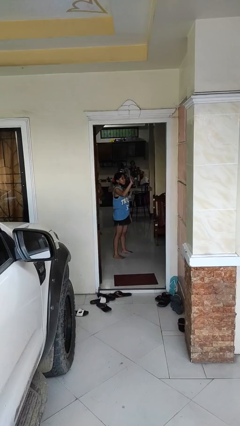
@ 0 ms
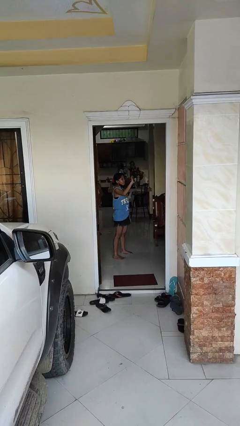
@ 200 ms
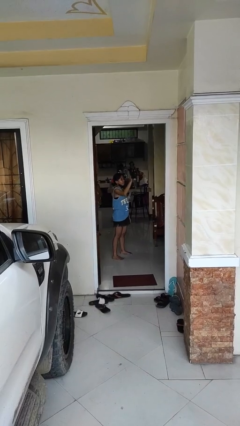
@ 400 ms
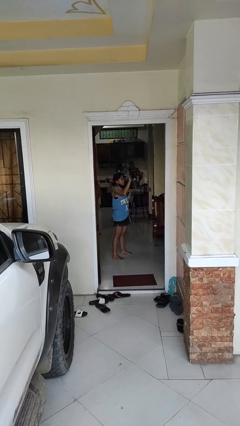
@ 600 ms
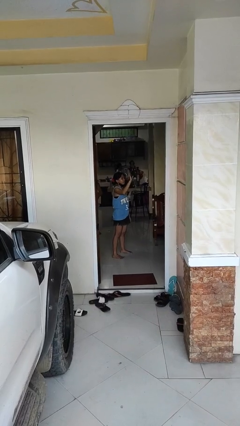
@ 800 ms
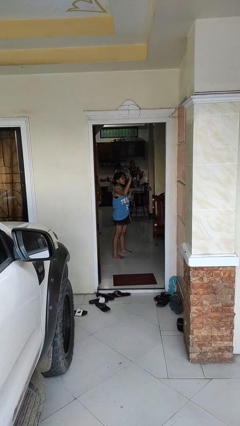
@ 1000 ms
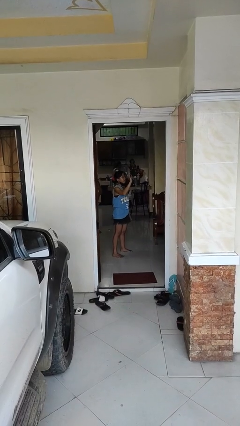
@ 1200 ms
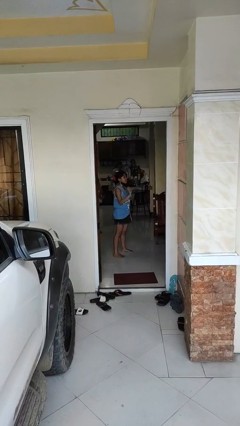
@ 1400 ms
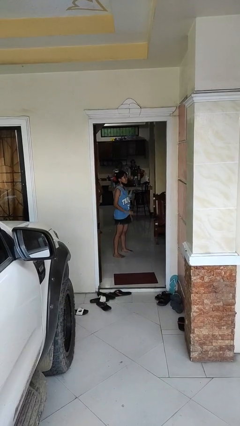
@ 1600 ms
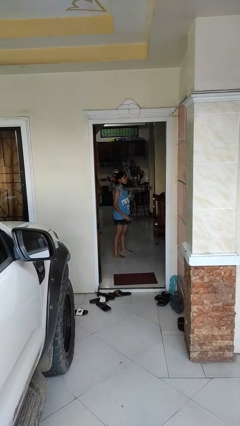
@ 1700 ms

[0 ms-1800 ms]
person waves at person

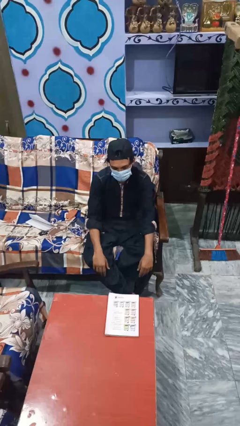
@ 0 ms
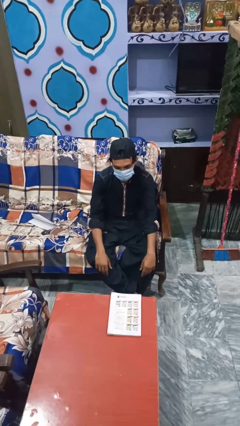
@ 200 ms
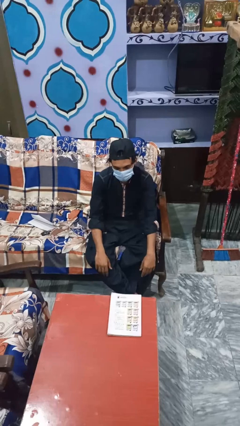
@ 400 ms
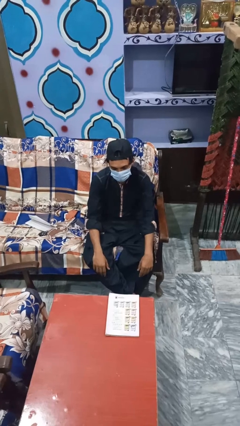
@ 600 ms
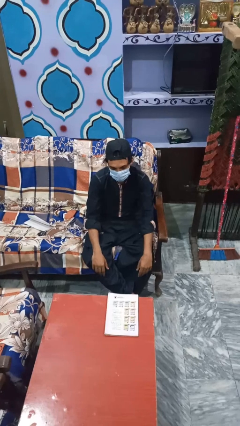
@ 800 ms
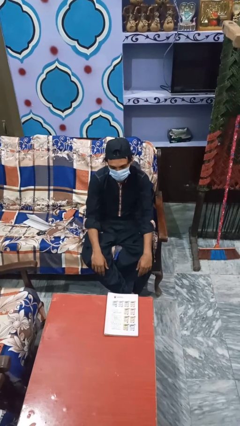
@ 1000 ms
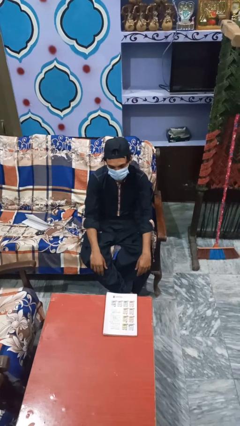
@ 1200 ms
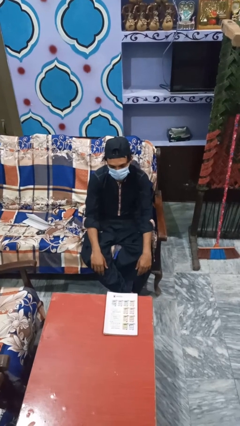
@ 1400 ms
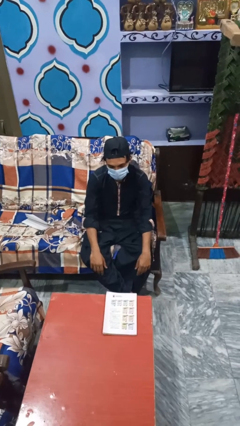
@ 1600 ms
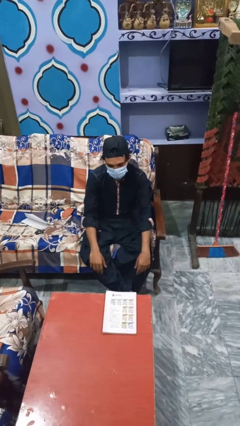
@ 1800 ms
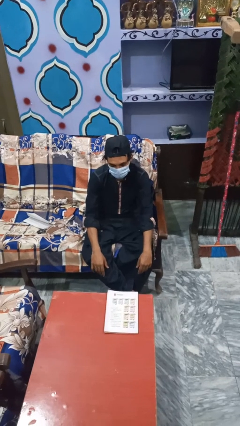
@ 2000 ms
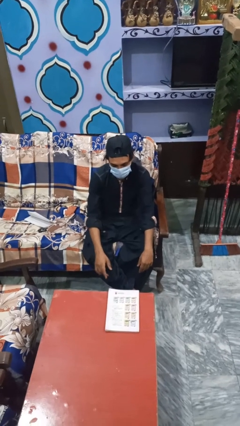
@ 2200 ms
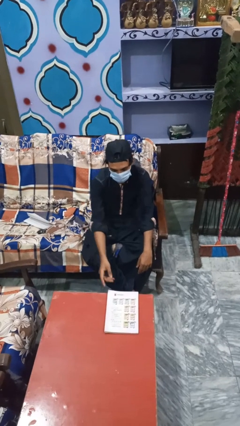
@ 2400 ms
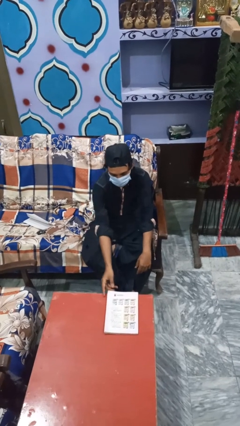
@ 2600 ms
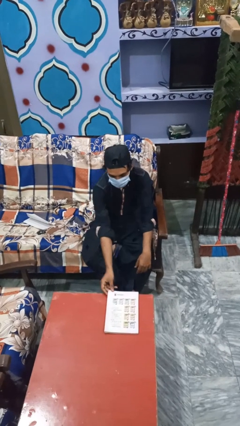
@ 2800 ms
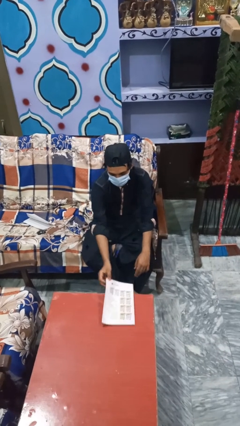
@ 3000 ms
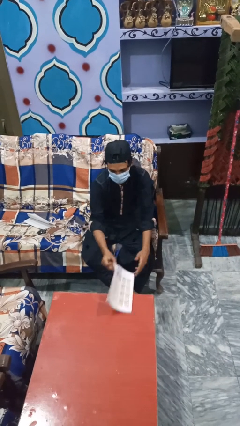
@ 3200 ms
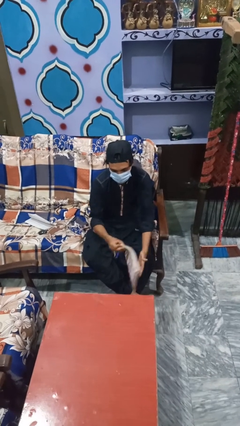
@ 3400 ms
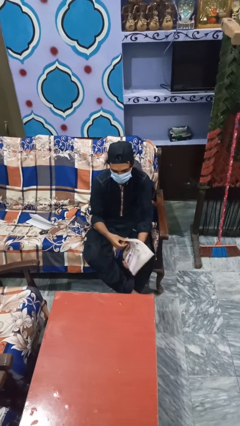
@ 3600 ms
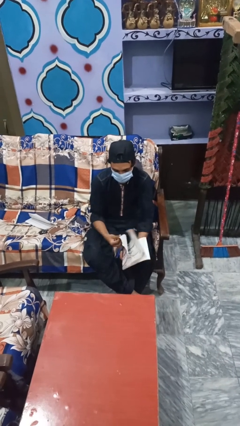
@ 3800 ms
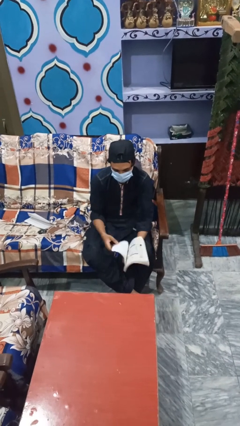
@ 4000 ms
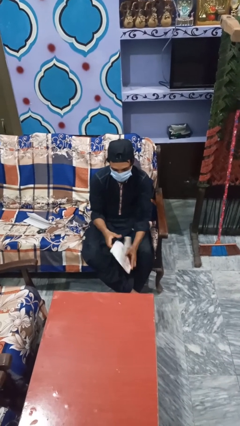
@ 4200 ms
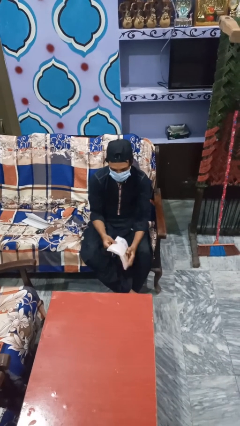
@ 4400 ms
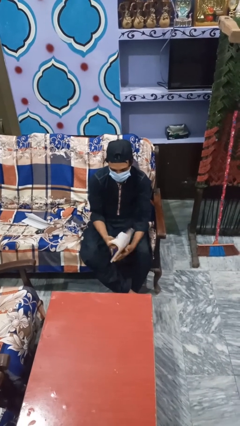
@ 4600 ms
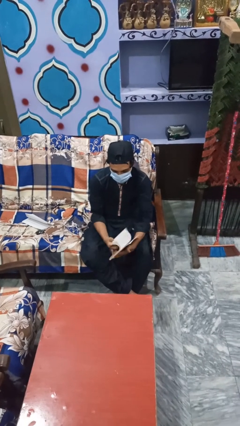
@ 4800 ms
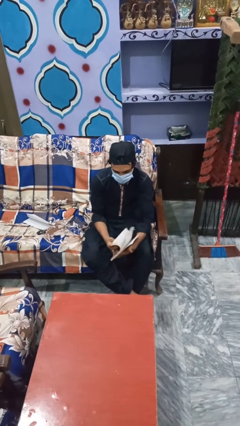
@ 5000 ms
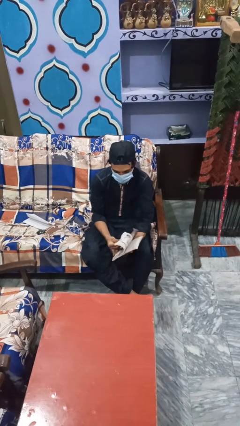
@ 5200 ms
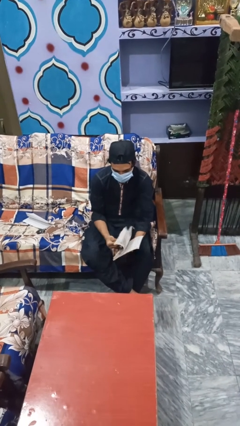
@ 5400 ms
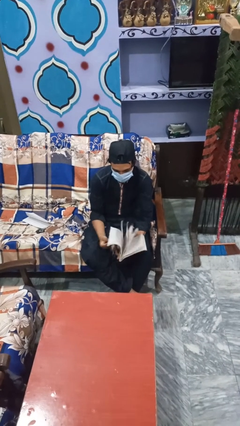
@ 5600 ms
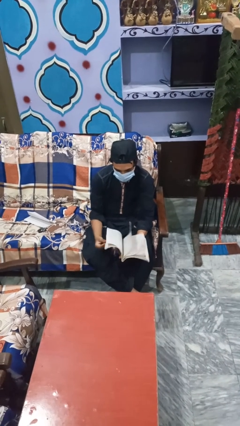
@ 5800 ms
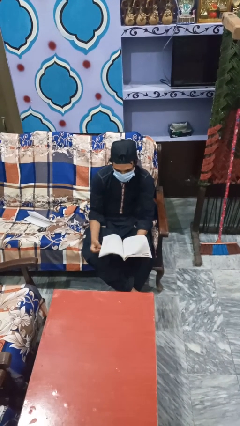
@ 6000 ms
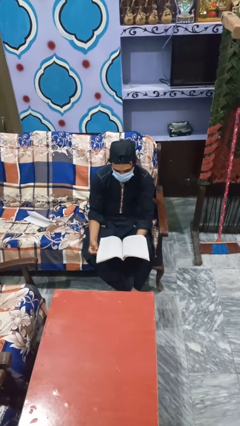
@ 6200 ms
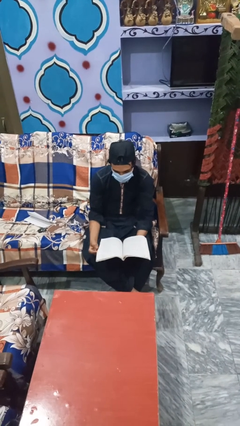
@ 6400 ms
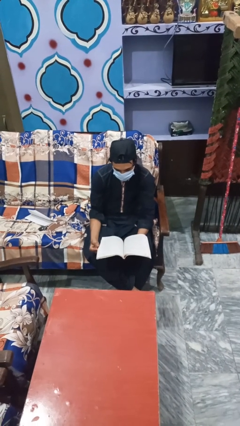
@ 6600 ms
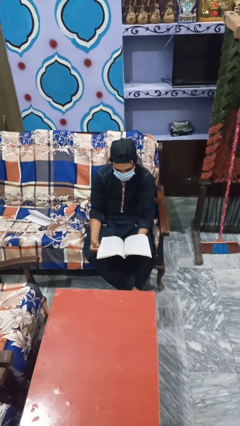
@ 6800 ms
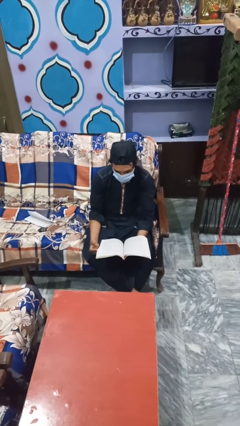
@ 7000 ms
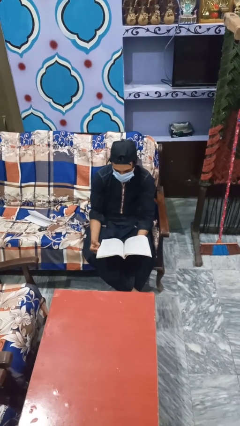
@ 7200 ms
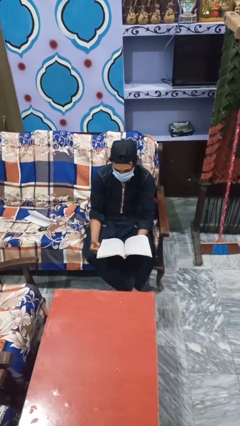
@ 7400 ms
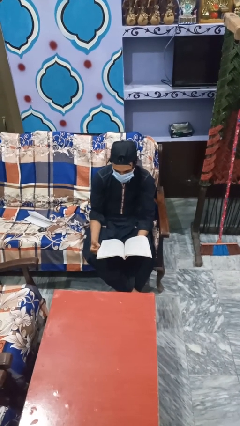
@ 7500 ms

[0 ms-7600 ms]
person reads magazine

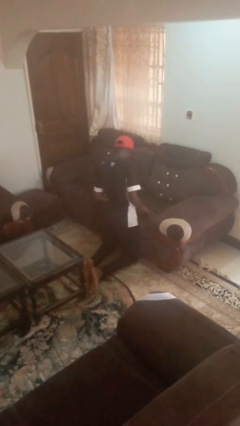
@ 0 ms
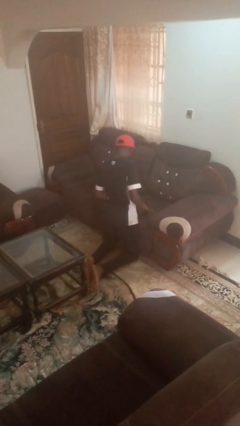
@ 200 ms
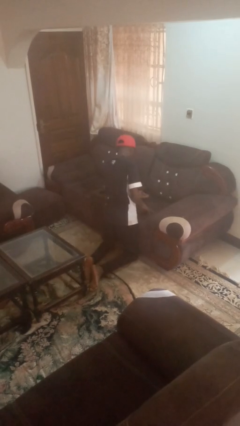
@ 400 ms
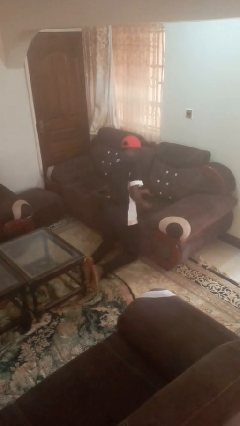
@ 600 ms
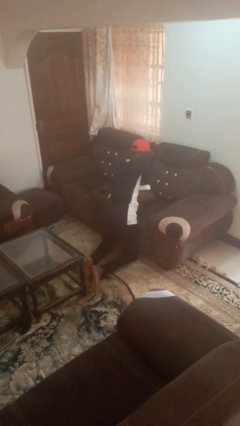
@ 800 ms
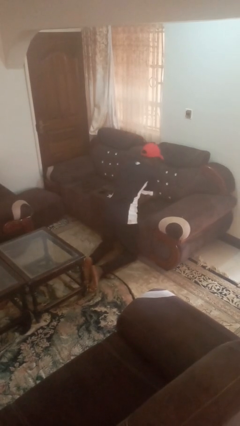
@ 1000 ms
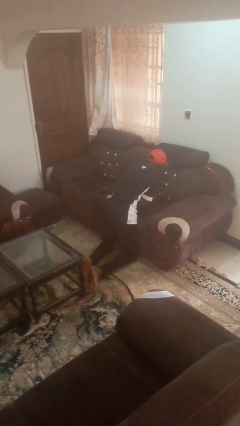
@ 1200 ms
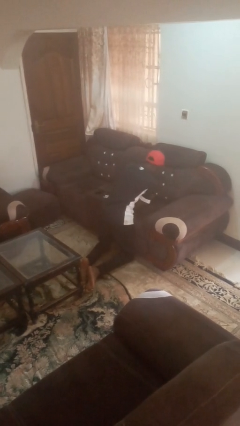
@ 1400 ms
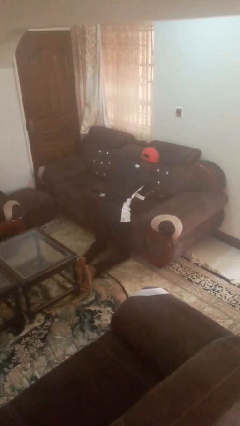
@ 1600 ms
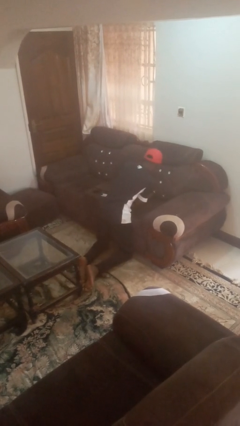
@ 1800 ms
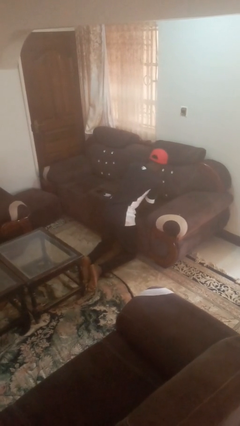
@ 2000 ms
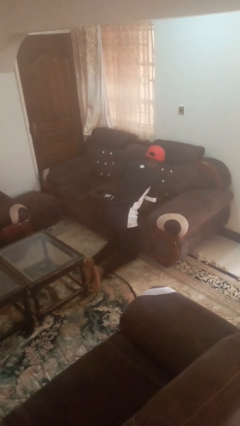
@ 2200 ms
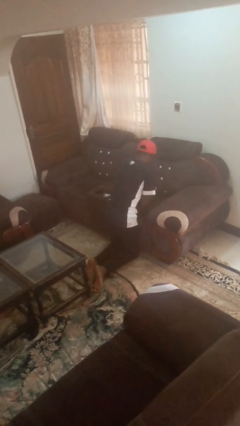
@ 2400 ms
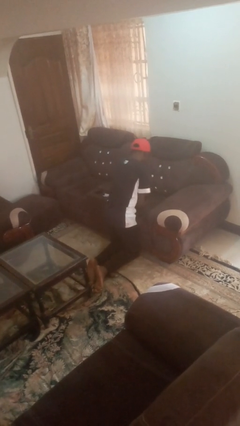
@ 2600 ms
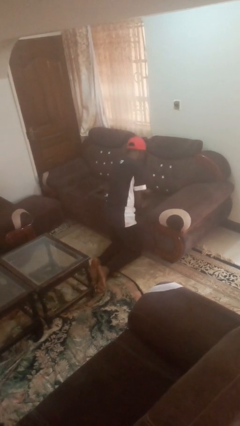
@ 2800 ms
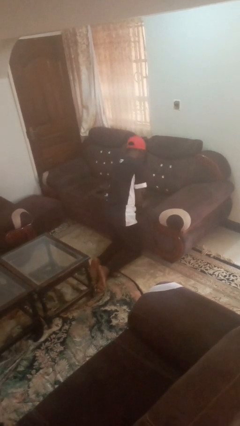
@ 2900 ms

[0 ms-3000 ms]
person searches in couch

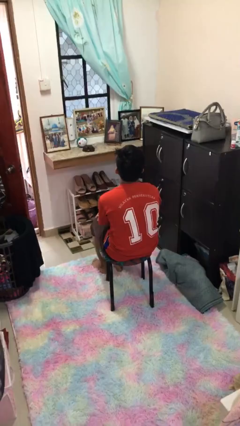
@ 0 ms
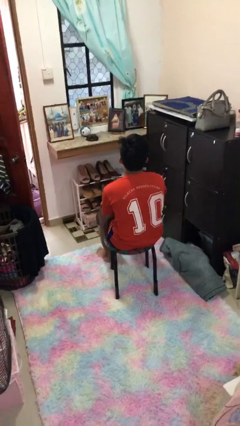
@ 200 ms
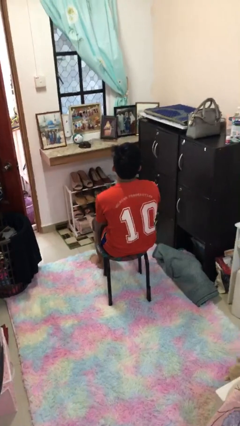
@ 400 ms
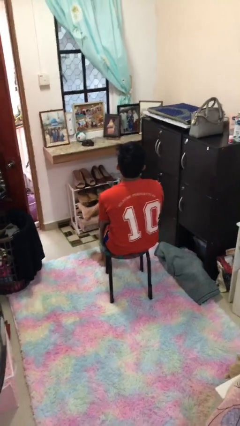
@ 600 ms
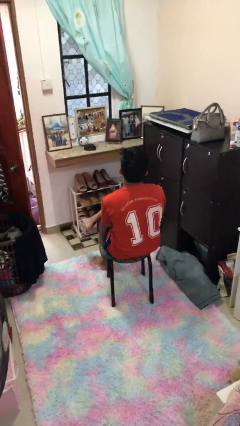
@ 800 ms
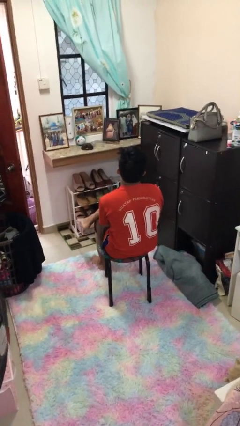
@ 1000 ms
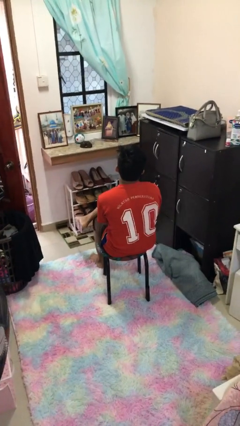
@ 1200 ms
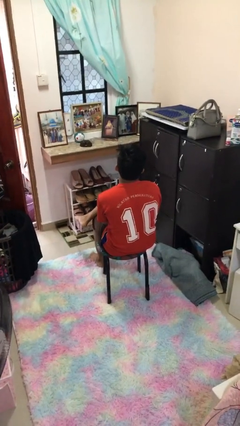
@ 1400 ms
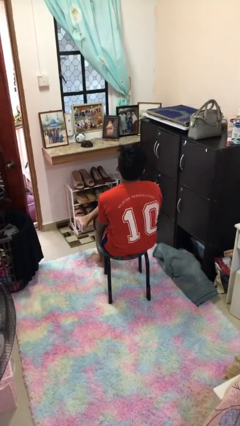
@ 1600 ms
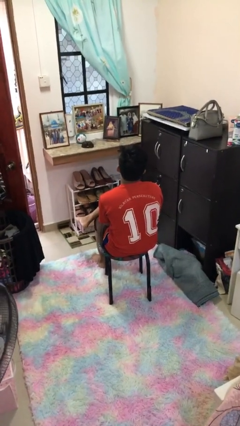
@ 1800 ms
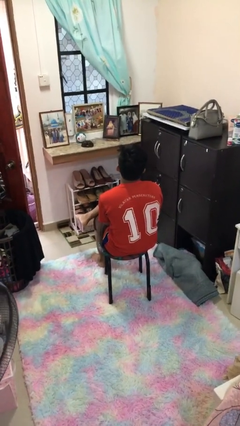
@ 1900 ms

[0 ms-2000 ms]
person crosses legs

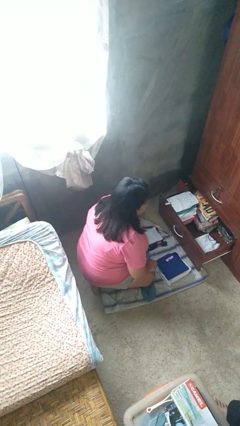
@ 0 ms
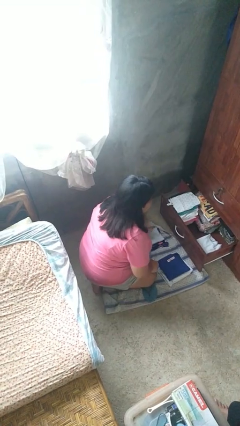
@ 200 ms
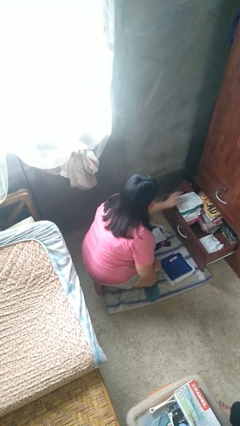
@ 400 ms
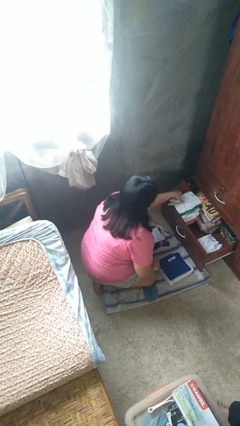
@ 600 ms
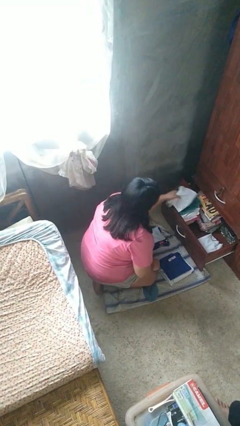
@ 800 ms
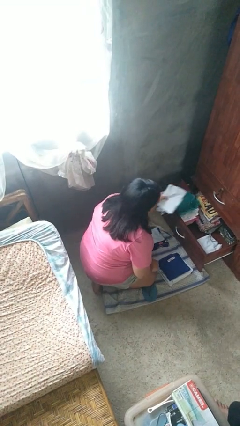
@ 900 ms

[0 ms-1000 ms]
person takes clothes from dresser

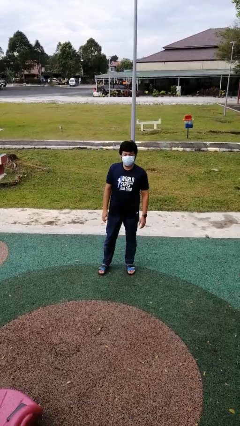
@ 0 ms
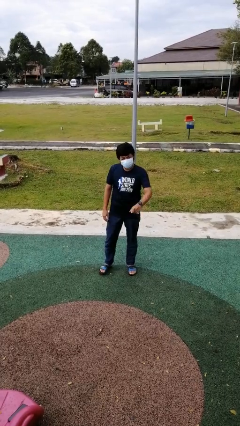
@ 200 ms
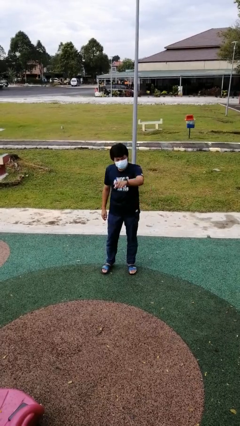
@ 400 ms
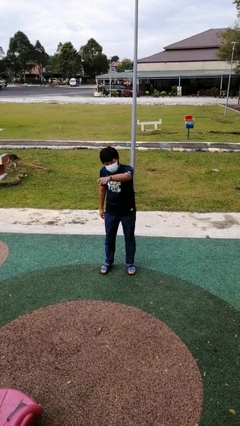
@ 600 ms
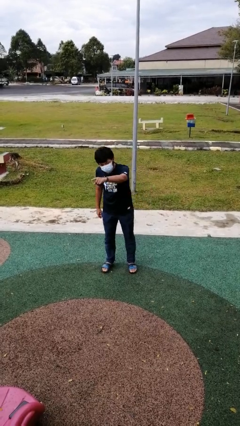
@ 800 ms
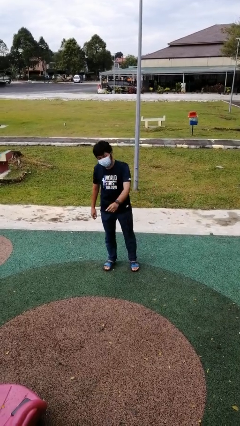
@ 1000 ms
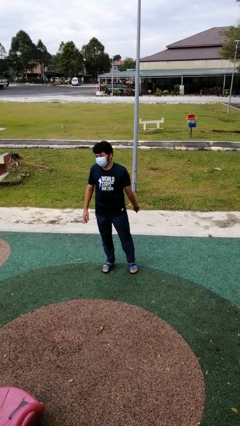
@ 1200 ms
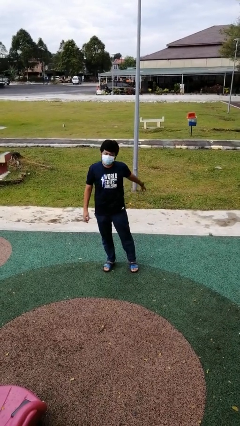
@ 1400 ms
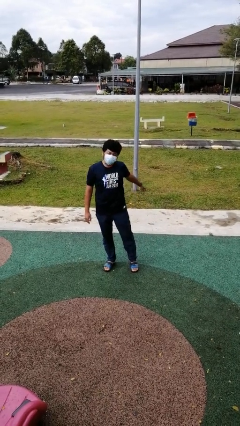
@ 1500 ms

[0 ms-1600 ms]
person points at person

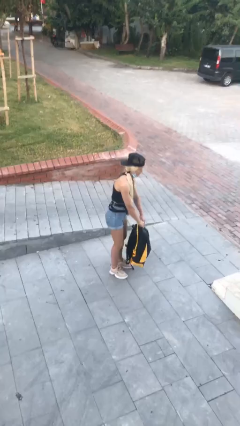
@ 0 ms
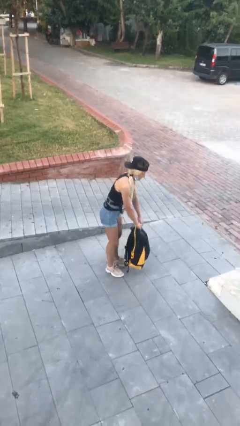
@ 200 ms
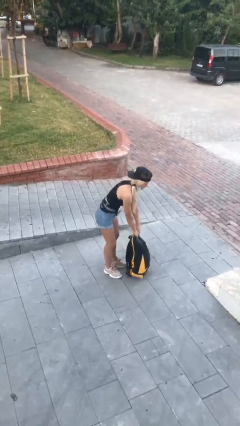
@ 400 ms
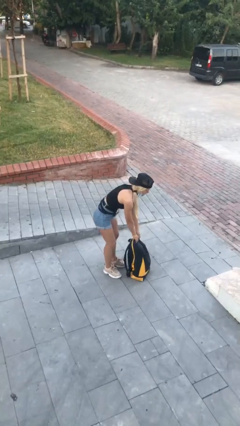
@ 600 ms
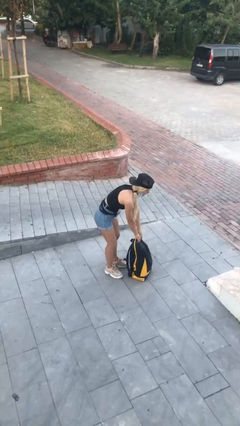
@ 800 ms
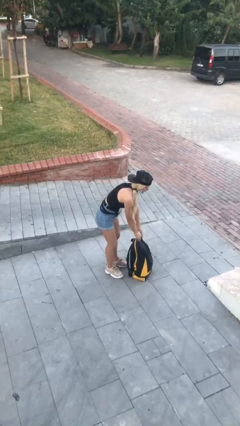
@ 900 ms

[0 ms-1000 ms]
person puts down object on floor
